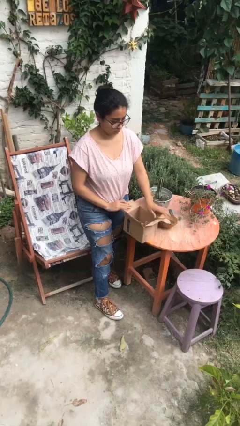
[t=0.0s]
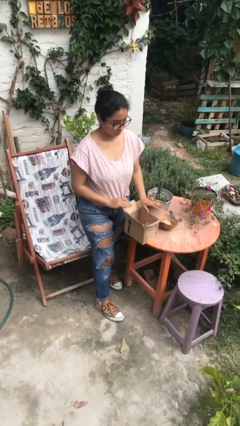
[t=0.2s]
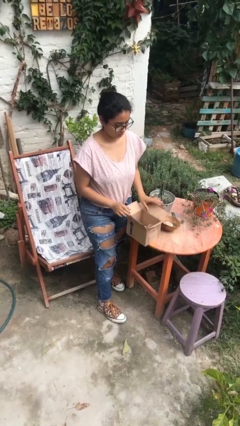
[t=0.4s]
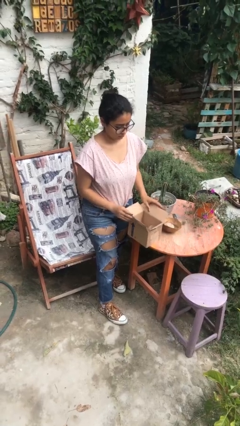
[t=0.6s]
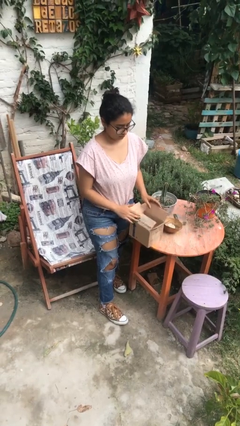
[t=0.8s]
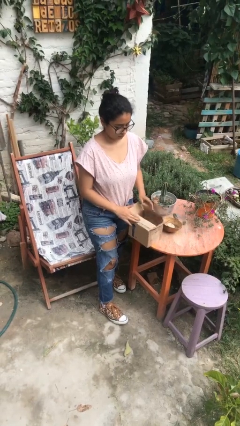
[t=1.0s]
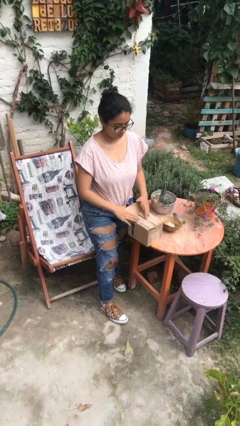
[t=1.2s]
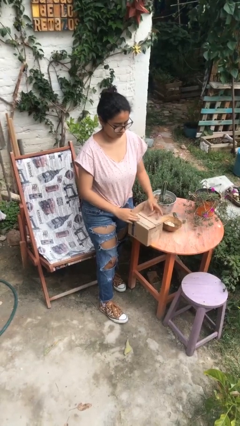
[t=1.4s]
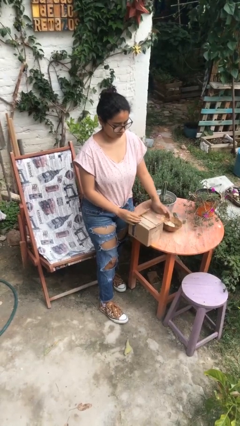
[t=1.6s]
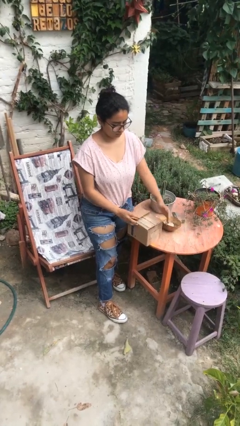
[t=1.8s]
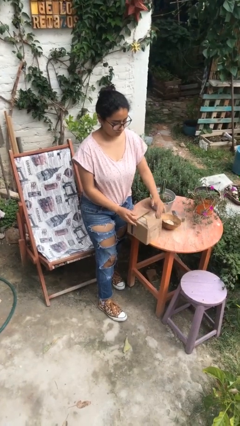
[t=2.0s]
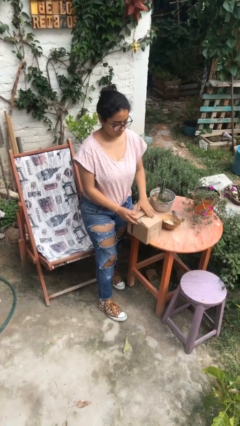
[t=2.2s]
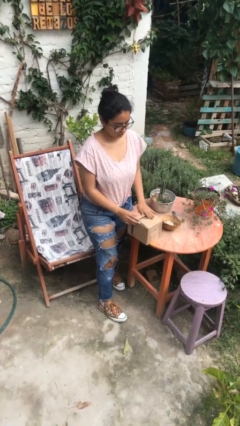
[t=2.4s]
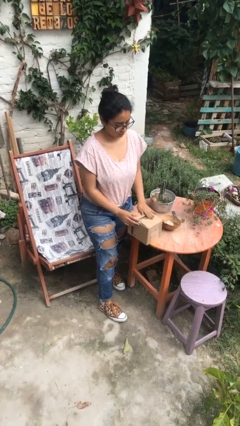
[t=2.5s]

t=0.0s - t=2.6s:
person closes box

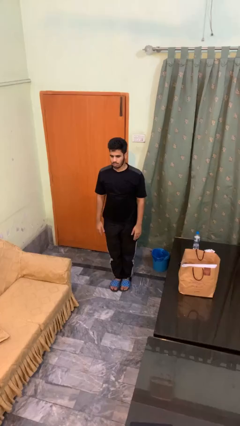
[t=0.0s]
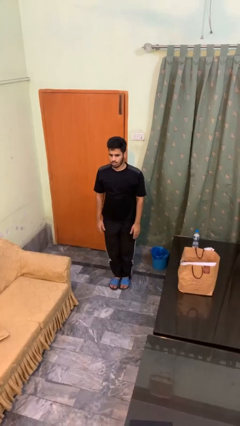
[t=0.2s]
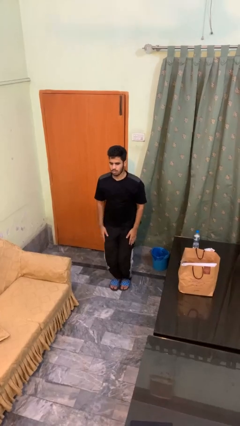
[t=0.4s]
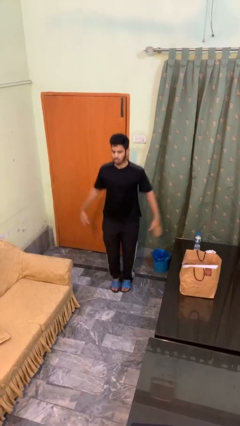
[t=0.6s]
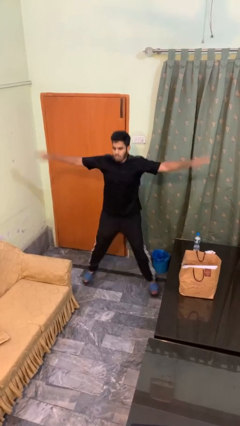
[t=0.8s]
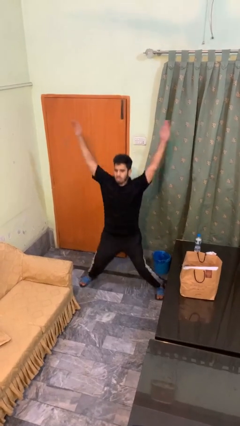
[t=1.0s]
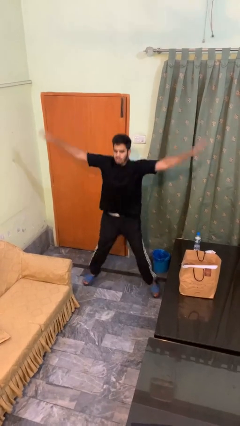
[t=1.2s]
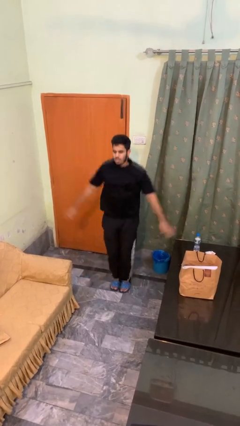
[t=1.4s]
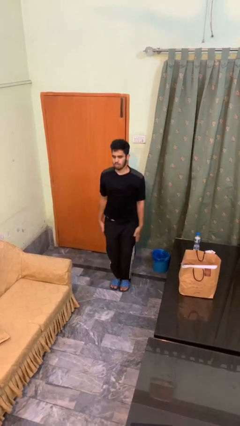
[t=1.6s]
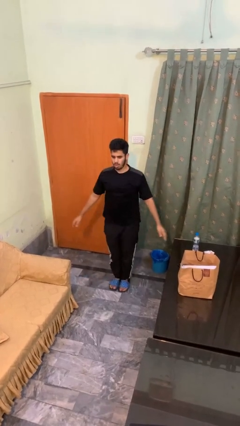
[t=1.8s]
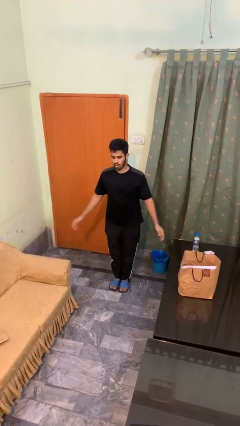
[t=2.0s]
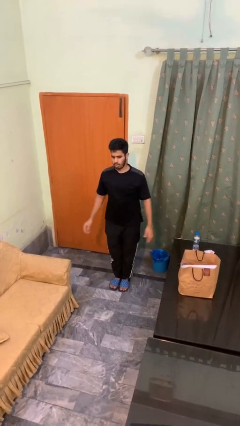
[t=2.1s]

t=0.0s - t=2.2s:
person exercises with jumping jacks

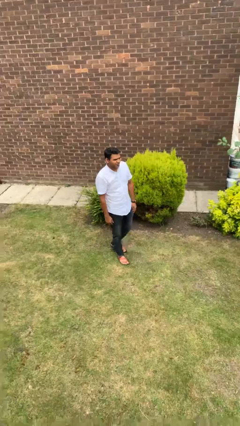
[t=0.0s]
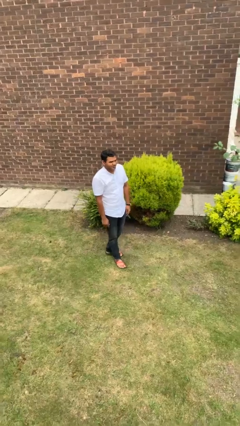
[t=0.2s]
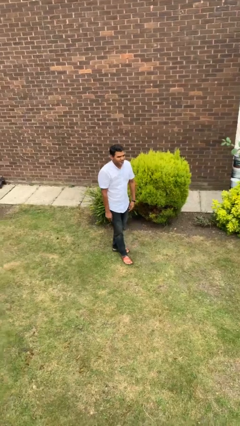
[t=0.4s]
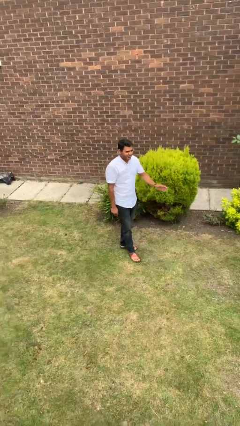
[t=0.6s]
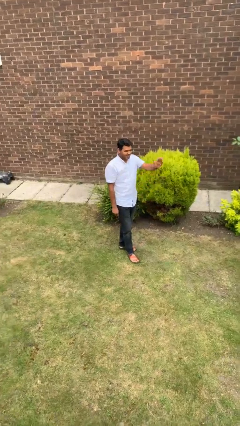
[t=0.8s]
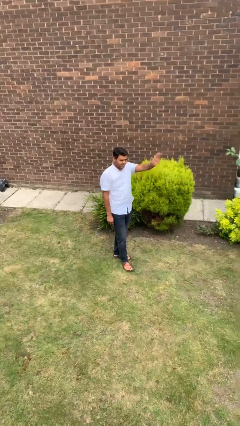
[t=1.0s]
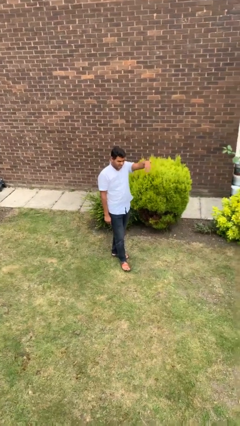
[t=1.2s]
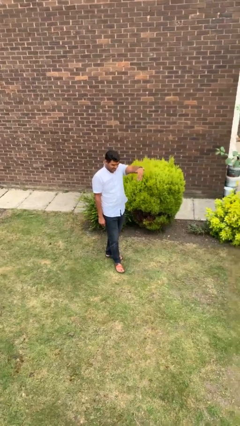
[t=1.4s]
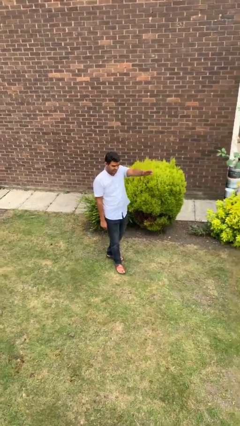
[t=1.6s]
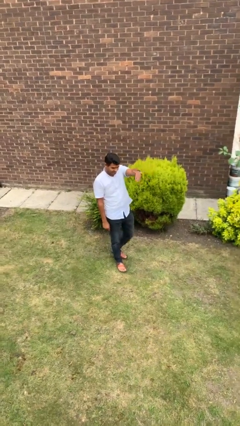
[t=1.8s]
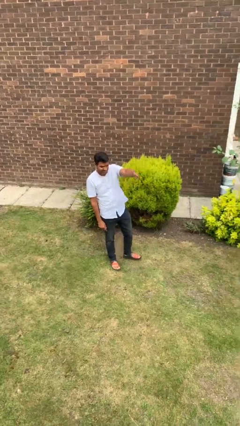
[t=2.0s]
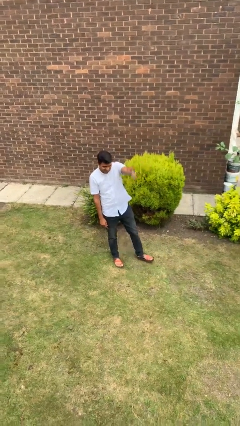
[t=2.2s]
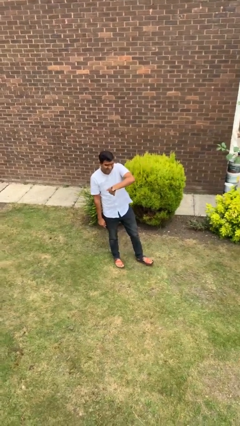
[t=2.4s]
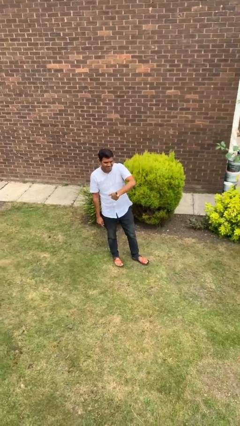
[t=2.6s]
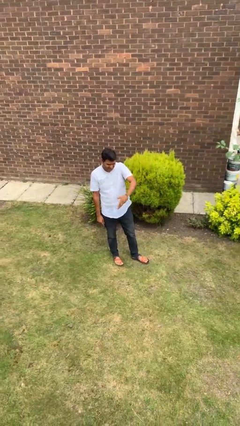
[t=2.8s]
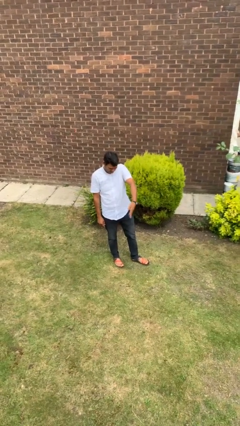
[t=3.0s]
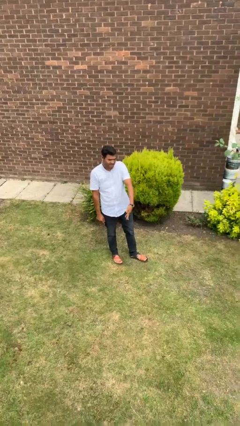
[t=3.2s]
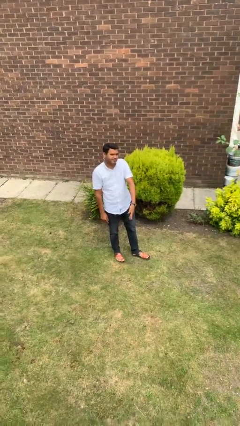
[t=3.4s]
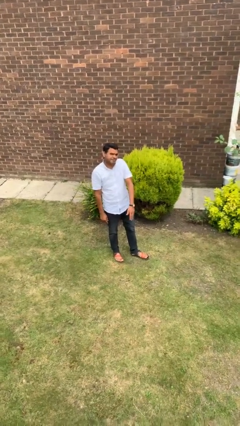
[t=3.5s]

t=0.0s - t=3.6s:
person gestures come here

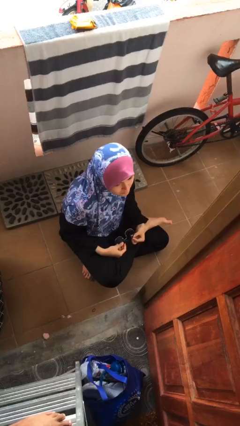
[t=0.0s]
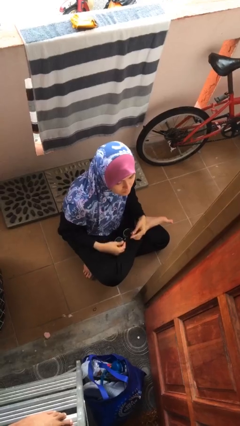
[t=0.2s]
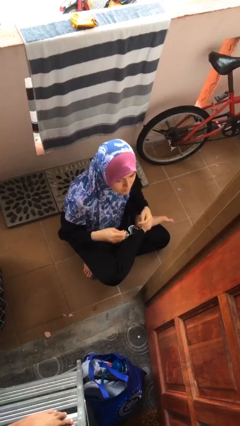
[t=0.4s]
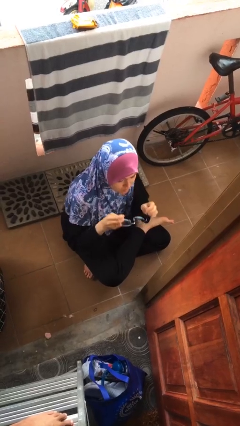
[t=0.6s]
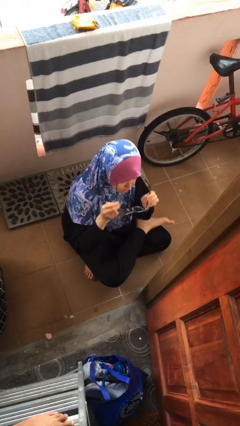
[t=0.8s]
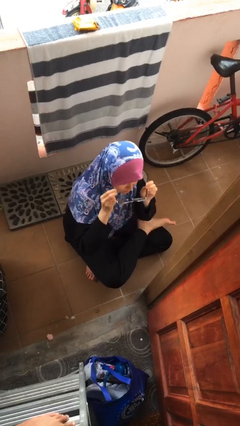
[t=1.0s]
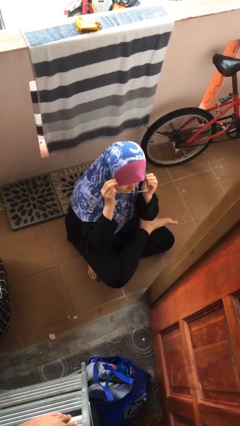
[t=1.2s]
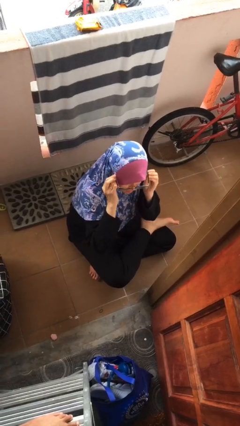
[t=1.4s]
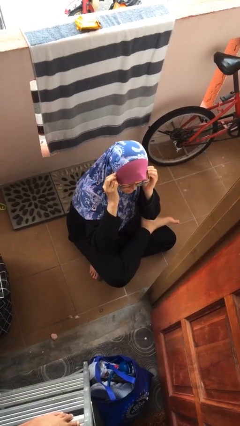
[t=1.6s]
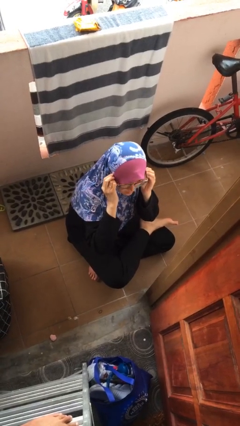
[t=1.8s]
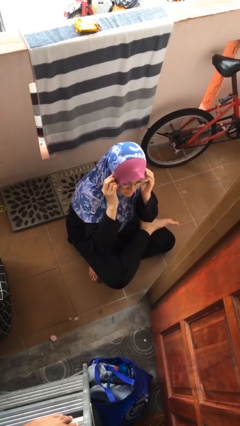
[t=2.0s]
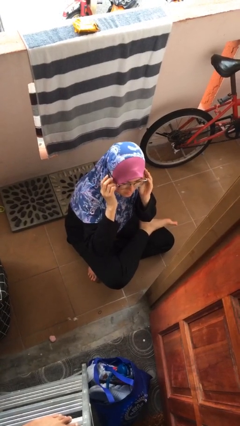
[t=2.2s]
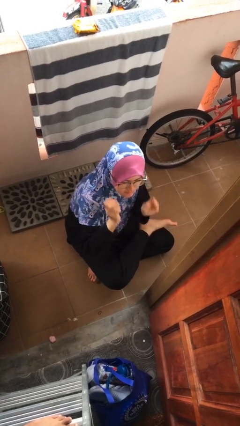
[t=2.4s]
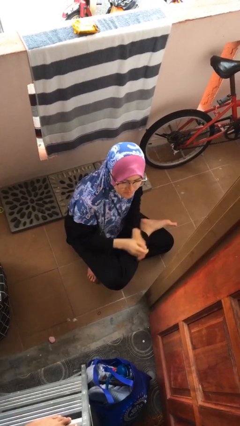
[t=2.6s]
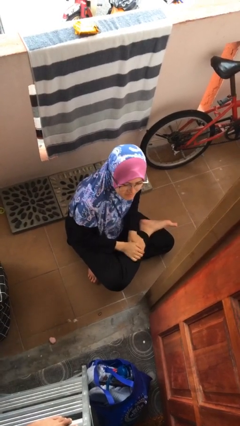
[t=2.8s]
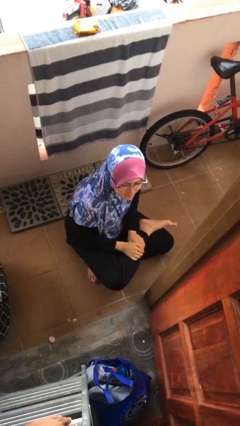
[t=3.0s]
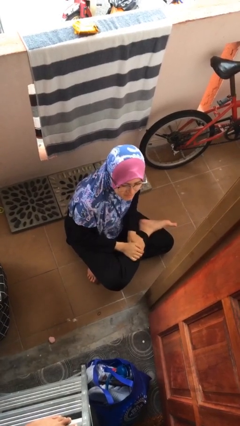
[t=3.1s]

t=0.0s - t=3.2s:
person puts on glasses

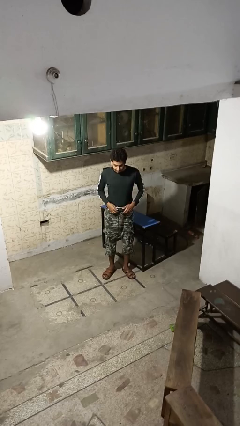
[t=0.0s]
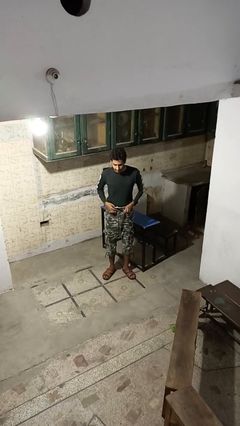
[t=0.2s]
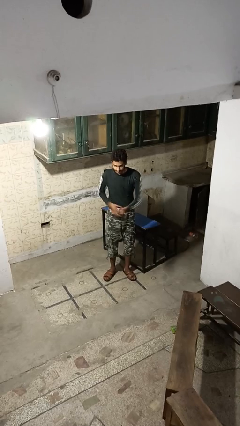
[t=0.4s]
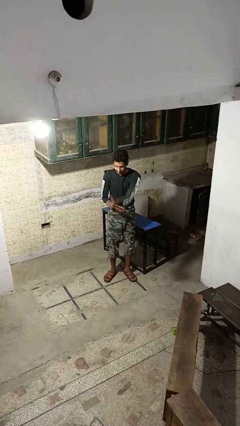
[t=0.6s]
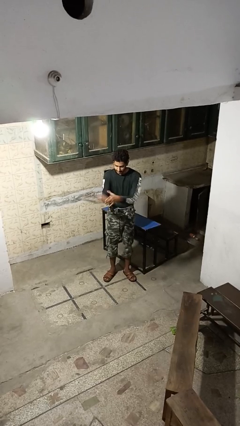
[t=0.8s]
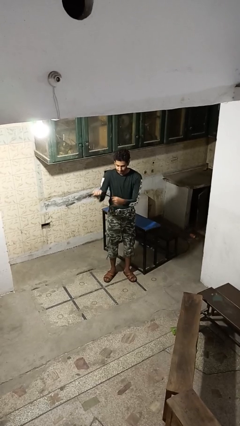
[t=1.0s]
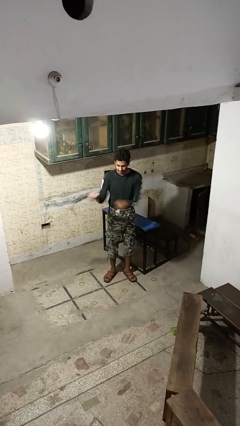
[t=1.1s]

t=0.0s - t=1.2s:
person takes off belt

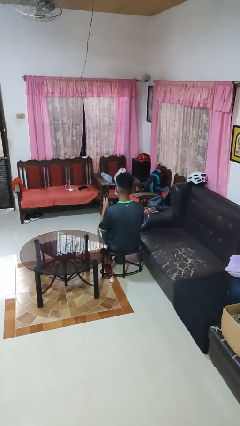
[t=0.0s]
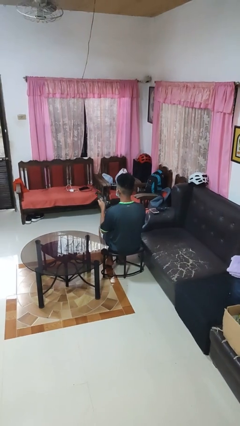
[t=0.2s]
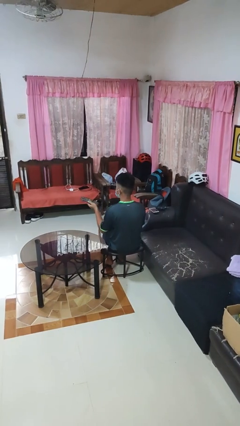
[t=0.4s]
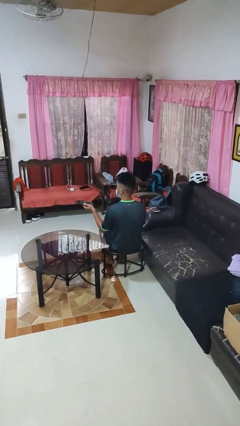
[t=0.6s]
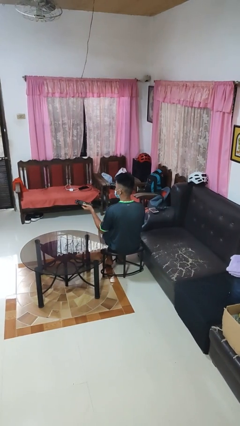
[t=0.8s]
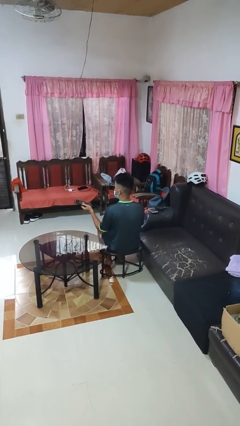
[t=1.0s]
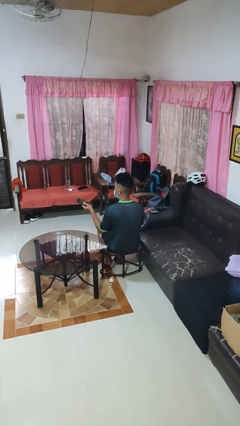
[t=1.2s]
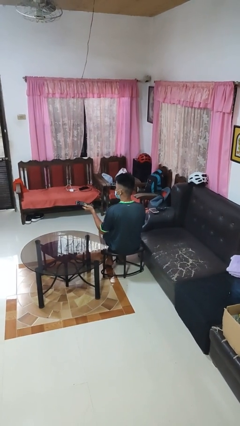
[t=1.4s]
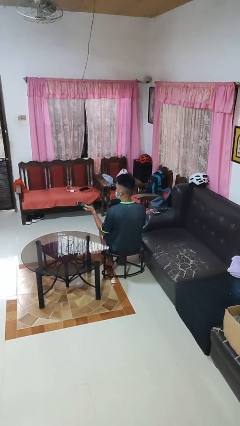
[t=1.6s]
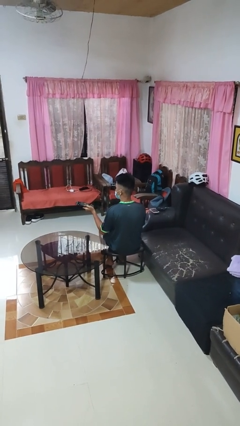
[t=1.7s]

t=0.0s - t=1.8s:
person uses television remote

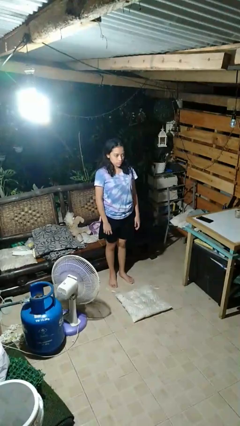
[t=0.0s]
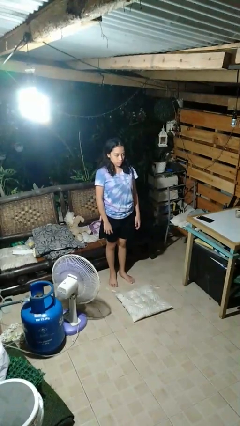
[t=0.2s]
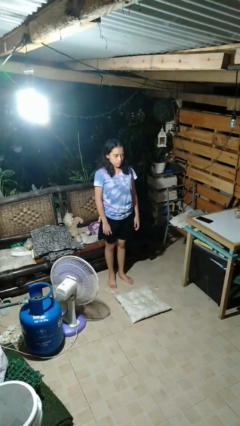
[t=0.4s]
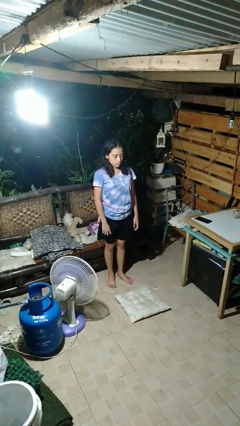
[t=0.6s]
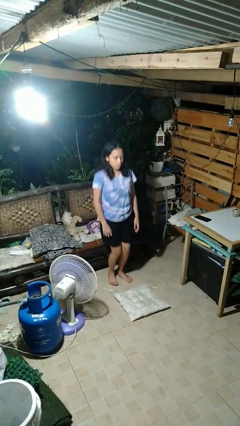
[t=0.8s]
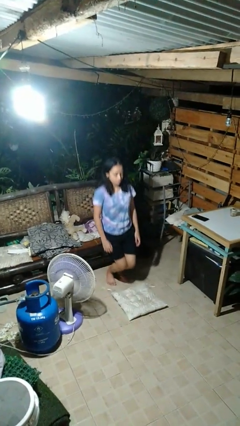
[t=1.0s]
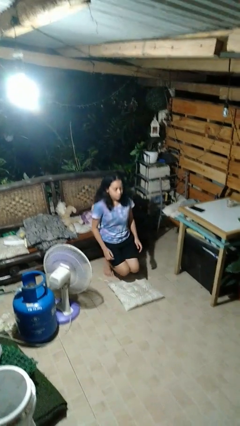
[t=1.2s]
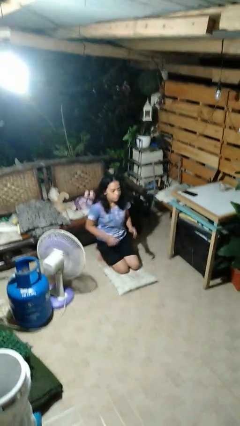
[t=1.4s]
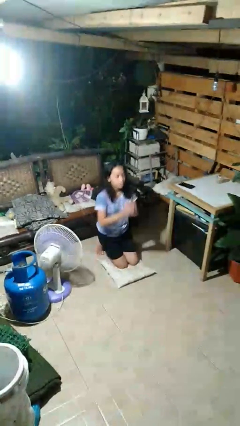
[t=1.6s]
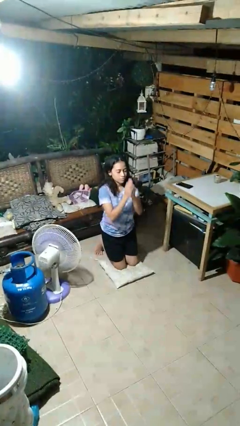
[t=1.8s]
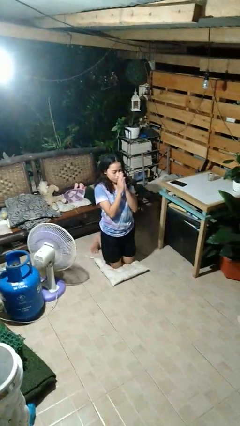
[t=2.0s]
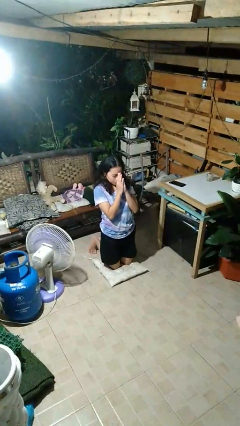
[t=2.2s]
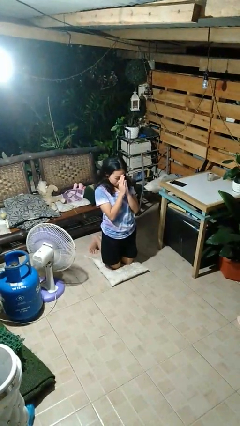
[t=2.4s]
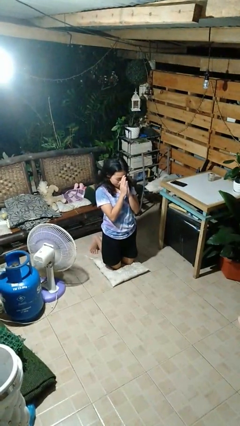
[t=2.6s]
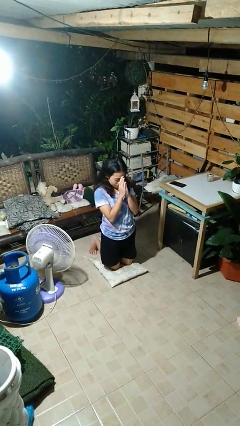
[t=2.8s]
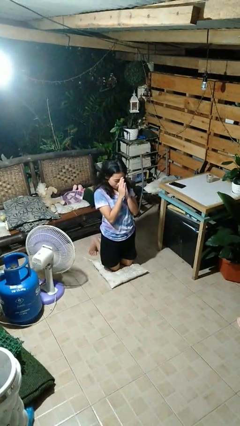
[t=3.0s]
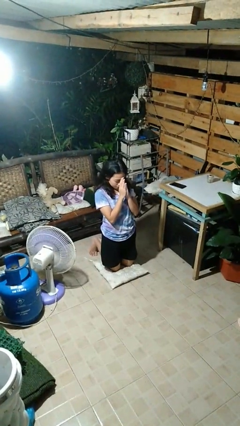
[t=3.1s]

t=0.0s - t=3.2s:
person prays
